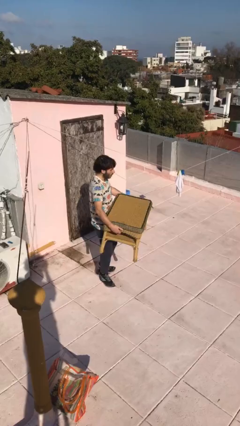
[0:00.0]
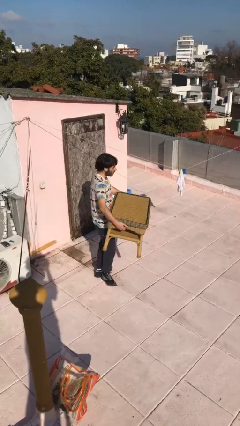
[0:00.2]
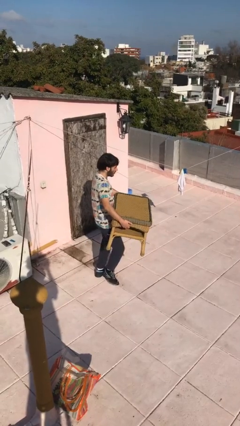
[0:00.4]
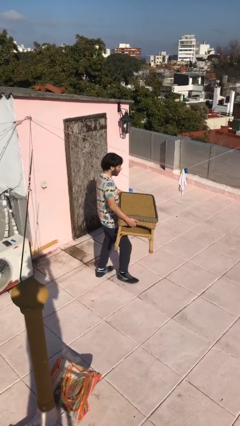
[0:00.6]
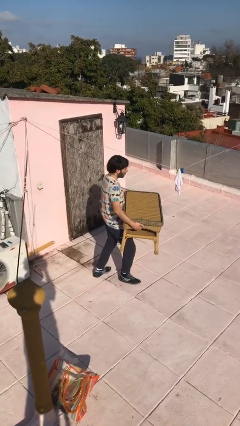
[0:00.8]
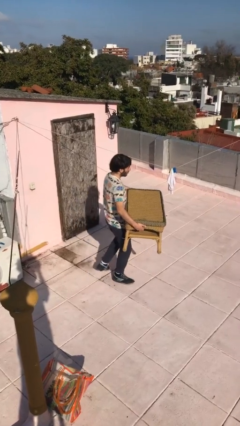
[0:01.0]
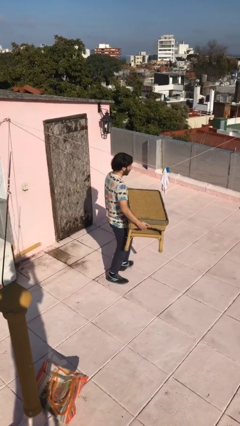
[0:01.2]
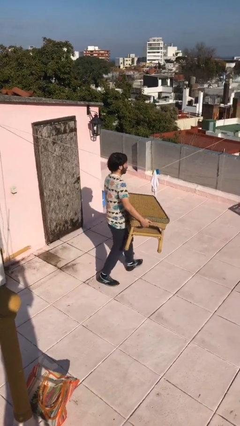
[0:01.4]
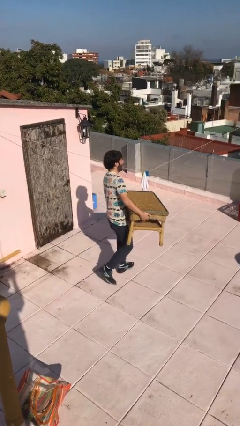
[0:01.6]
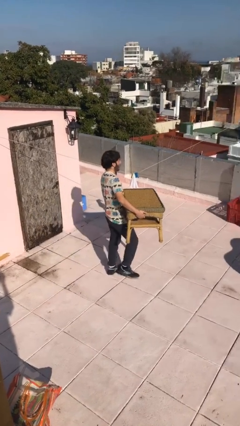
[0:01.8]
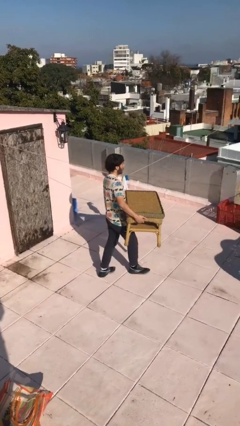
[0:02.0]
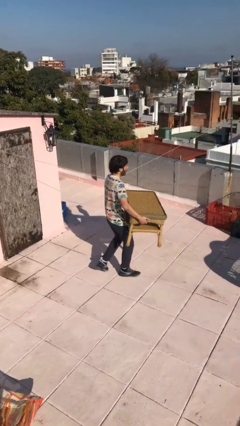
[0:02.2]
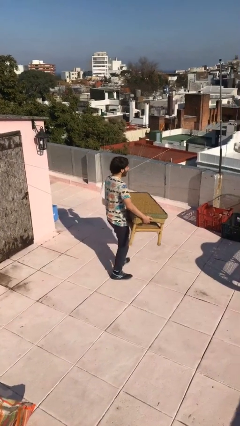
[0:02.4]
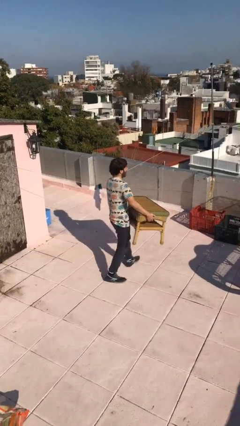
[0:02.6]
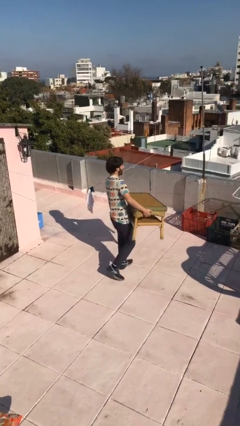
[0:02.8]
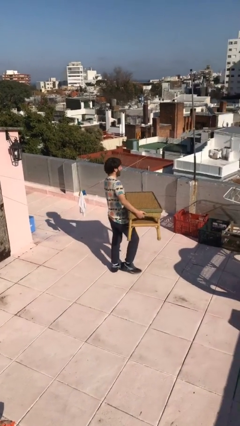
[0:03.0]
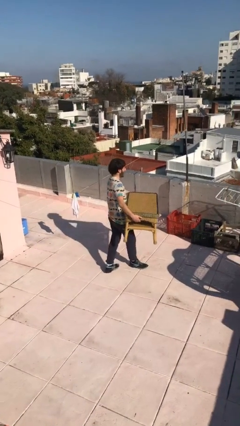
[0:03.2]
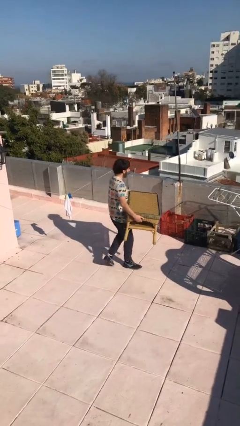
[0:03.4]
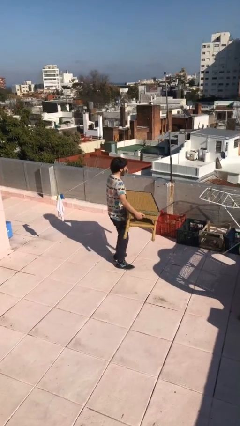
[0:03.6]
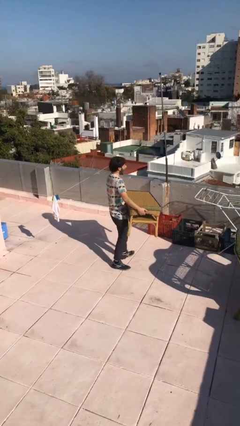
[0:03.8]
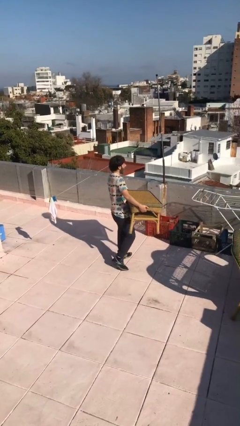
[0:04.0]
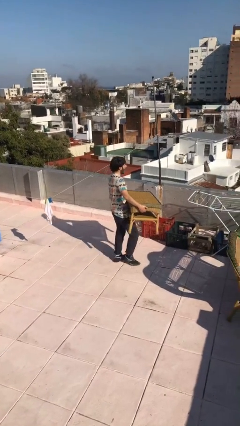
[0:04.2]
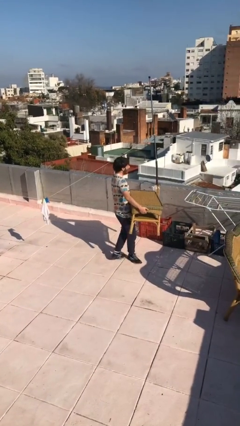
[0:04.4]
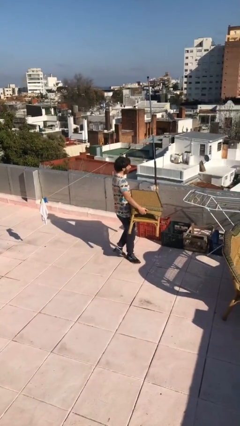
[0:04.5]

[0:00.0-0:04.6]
person carries furniture

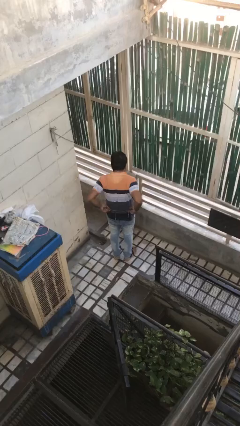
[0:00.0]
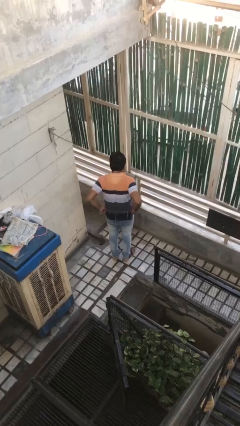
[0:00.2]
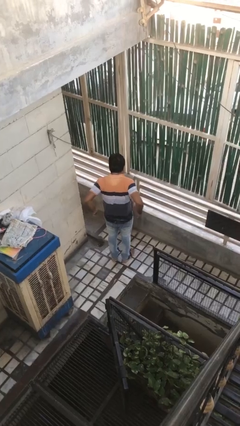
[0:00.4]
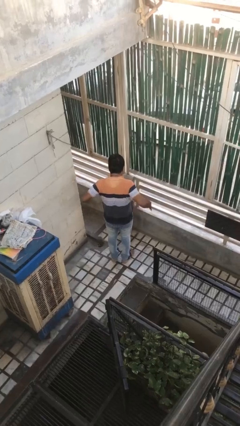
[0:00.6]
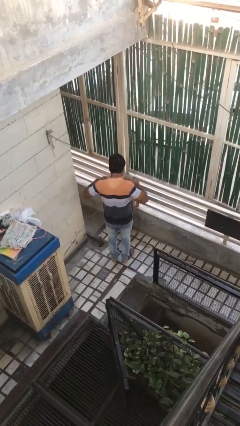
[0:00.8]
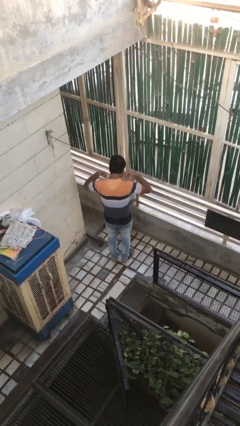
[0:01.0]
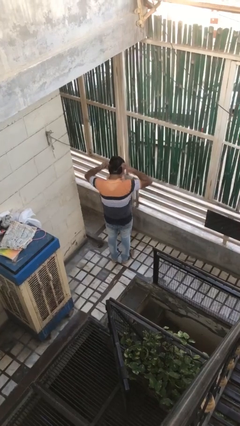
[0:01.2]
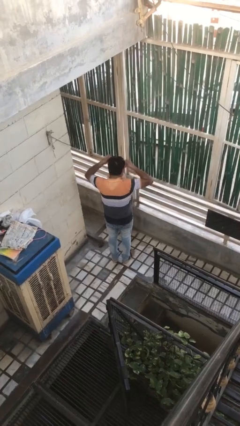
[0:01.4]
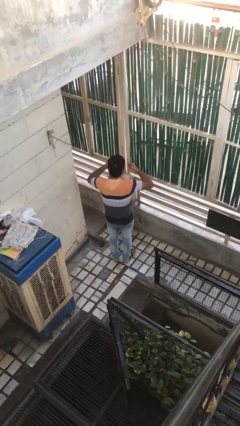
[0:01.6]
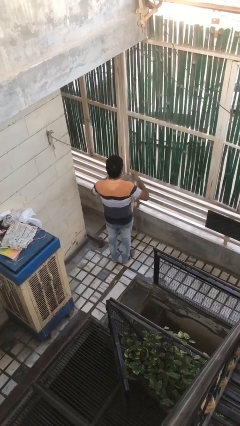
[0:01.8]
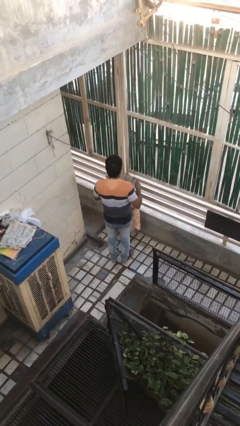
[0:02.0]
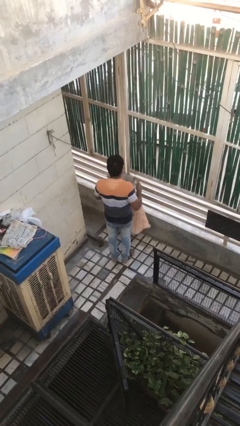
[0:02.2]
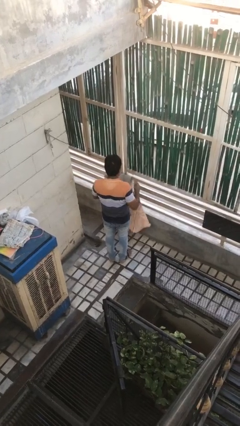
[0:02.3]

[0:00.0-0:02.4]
person takes off apron

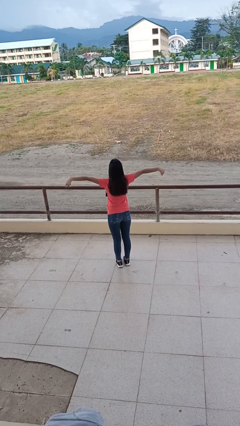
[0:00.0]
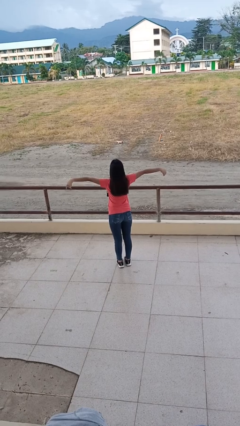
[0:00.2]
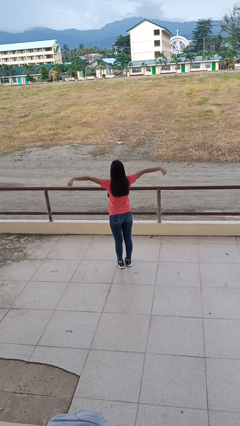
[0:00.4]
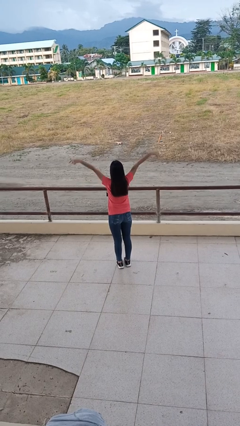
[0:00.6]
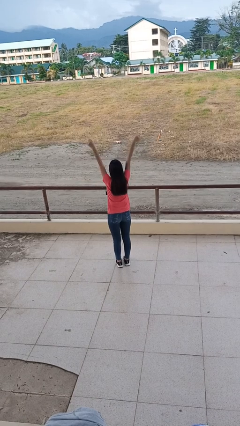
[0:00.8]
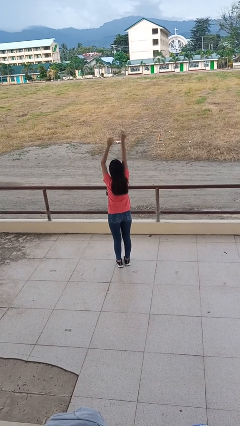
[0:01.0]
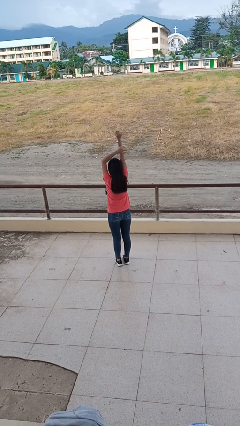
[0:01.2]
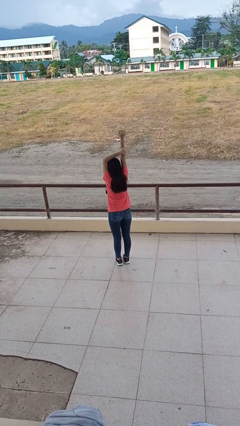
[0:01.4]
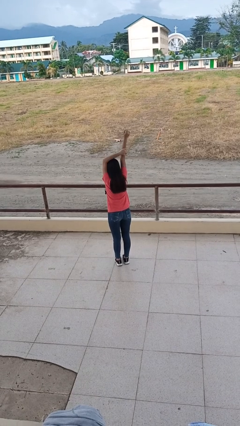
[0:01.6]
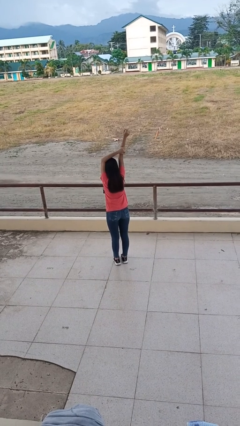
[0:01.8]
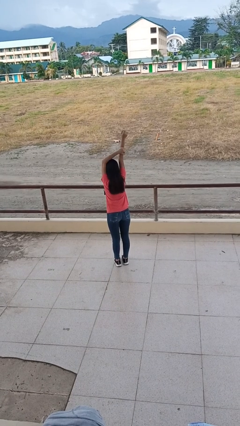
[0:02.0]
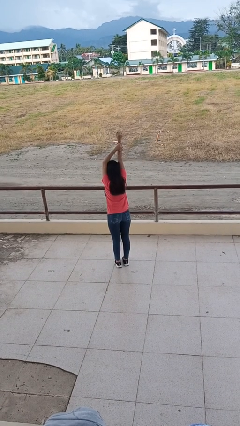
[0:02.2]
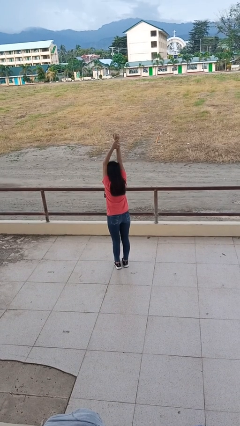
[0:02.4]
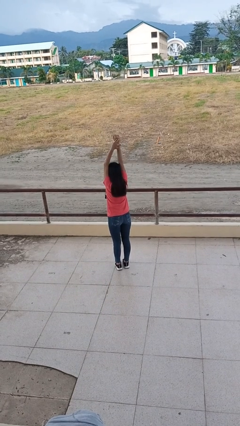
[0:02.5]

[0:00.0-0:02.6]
person stretches arms over head

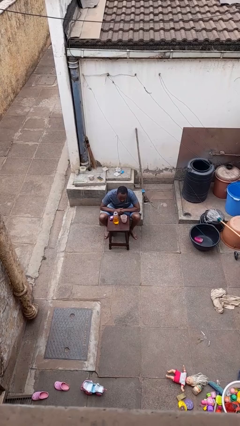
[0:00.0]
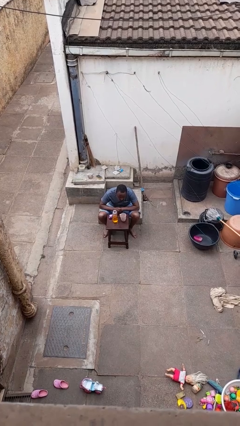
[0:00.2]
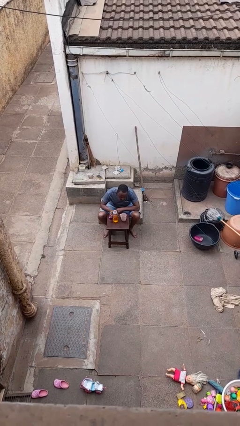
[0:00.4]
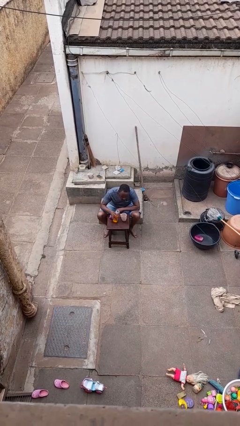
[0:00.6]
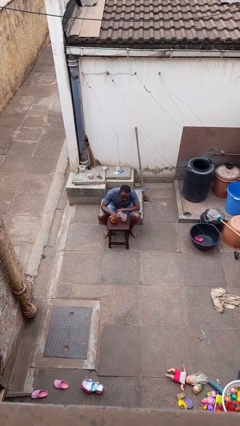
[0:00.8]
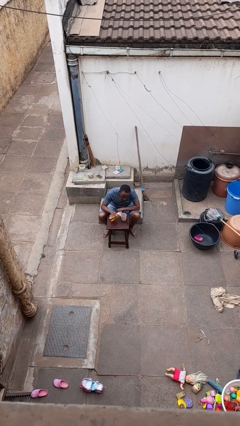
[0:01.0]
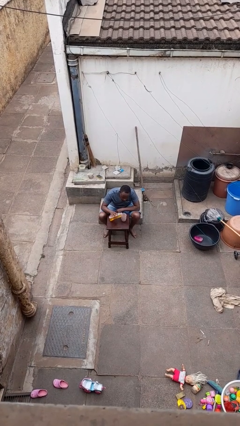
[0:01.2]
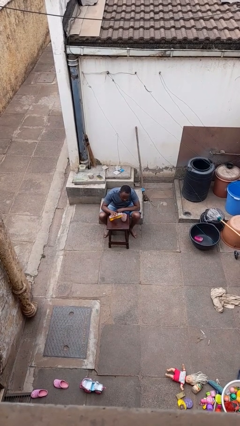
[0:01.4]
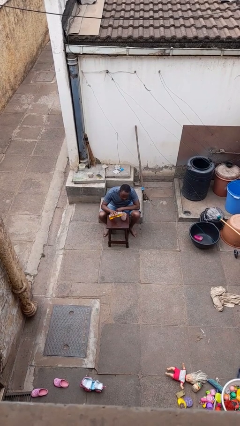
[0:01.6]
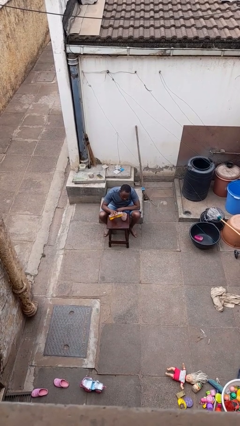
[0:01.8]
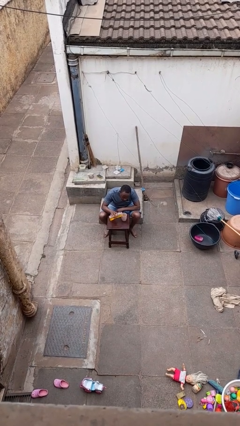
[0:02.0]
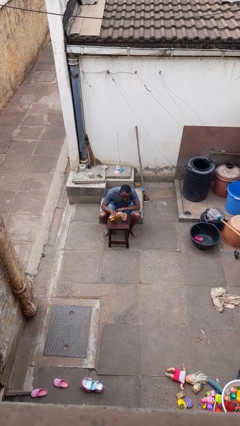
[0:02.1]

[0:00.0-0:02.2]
person pours liquid into cup

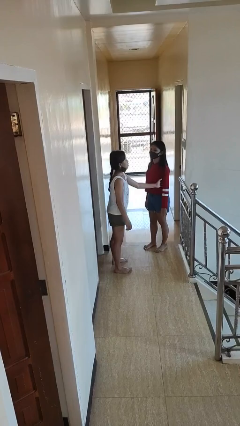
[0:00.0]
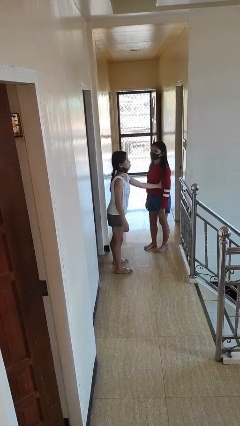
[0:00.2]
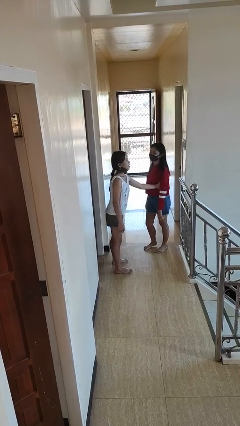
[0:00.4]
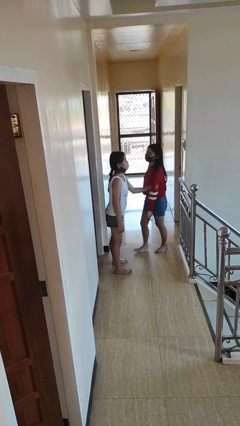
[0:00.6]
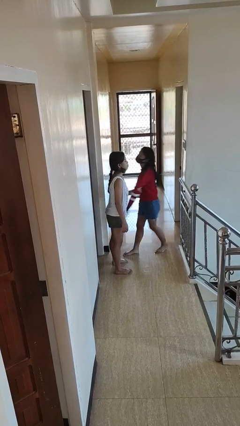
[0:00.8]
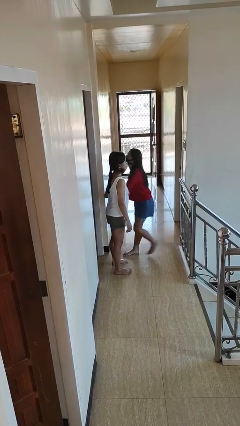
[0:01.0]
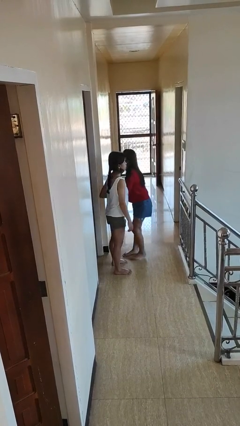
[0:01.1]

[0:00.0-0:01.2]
person grabs person by bicep

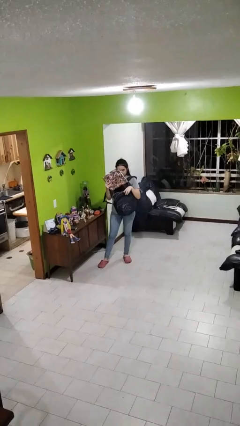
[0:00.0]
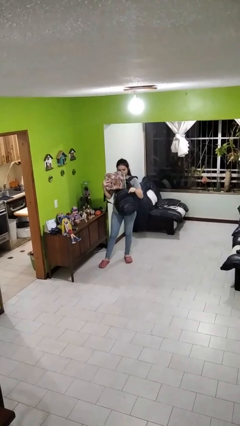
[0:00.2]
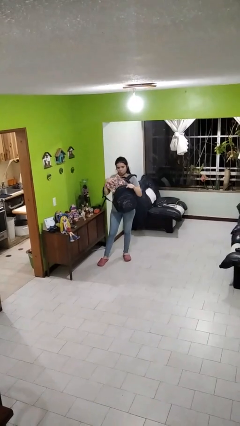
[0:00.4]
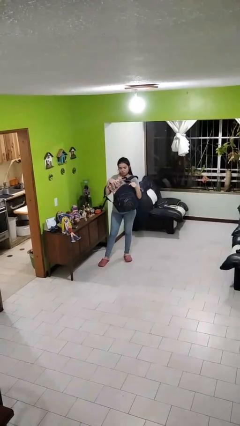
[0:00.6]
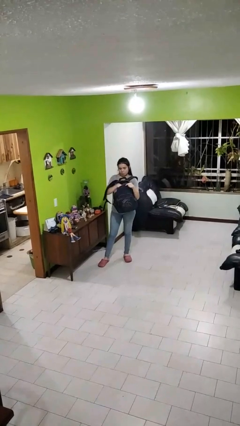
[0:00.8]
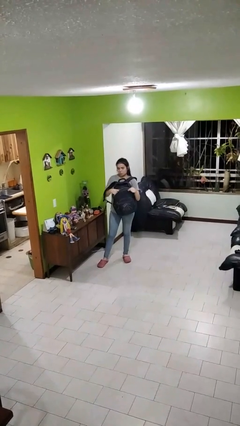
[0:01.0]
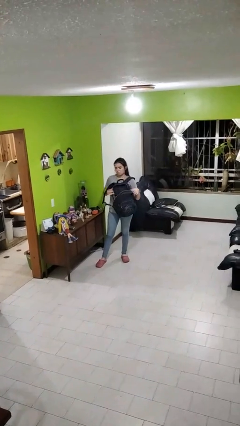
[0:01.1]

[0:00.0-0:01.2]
person puts object into backpack

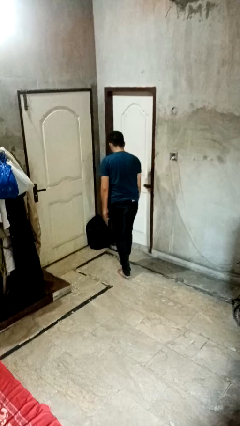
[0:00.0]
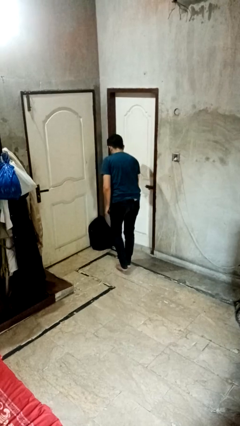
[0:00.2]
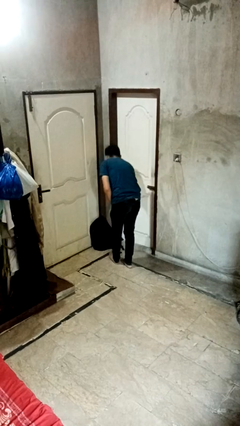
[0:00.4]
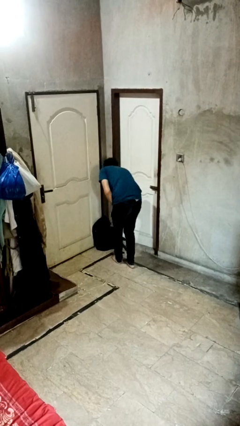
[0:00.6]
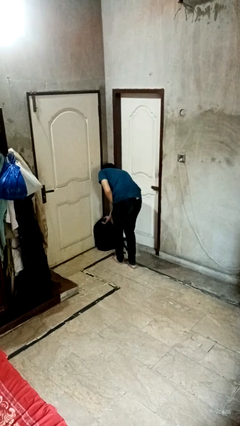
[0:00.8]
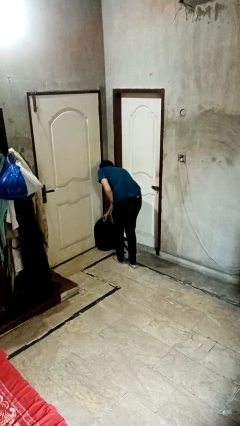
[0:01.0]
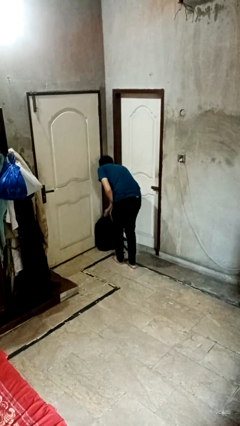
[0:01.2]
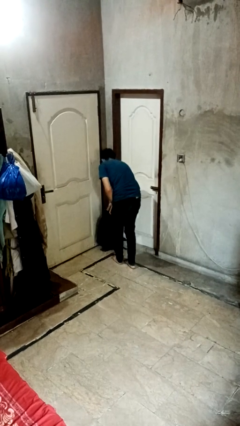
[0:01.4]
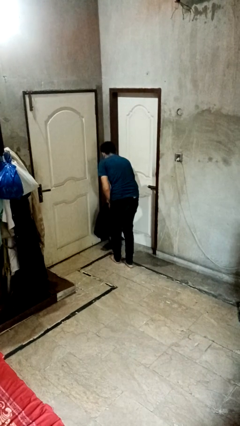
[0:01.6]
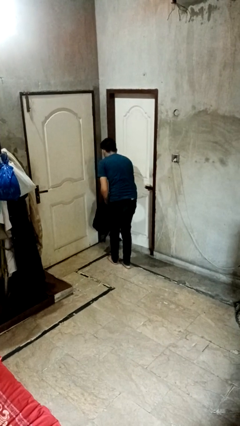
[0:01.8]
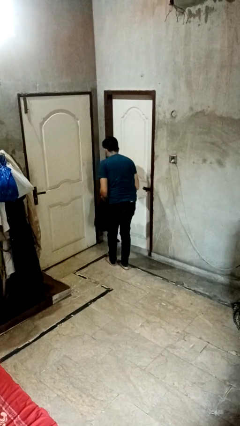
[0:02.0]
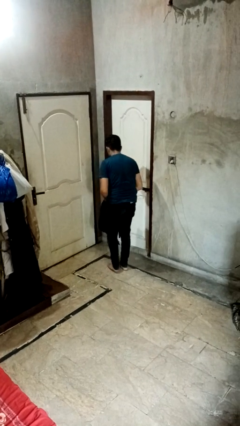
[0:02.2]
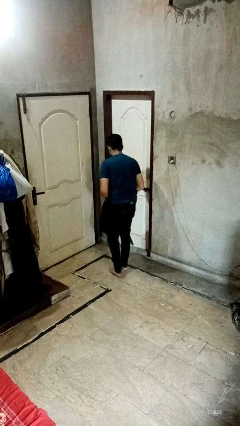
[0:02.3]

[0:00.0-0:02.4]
person picks up object from floor

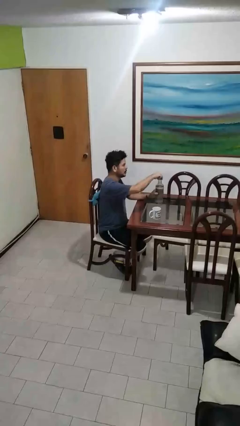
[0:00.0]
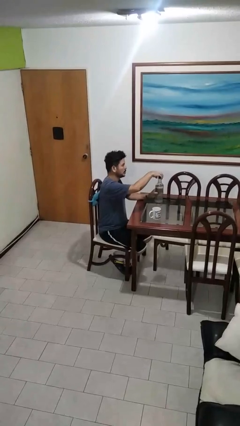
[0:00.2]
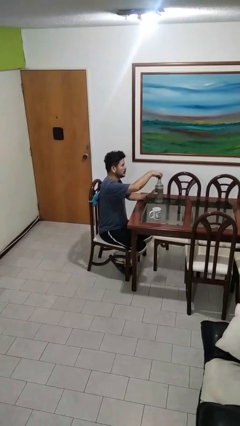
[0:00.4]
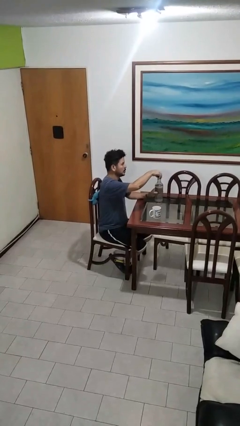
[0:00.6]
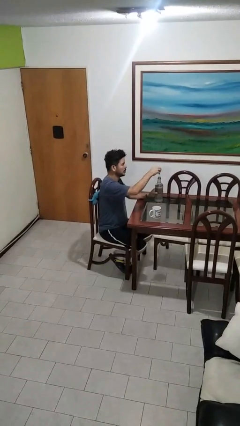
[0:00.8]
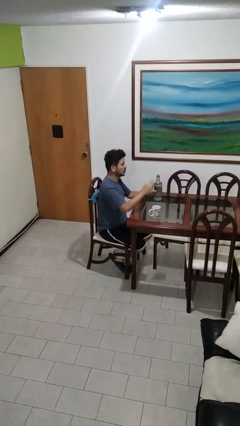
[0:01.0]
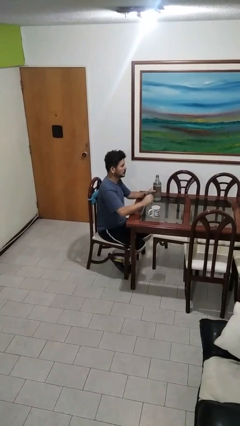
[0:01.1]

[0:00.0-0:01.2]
person unscrews lid from bottle
